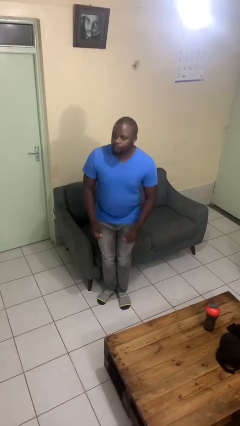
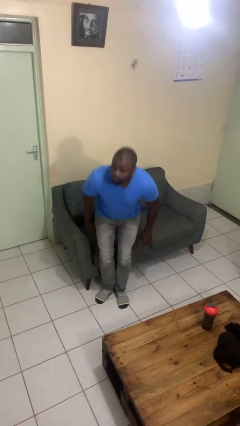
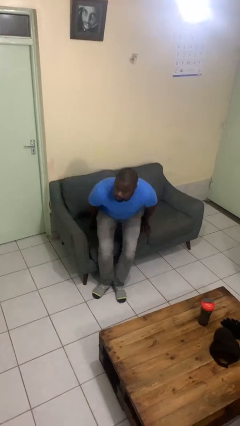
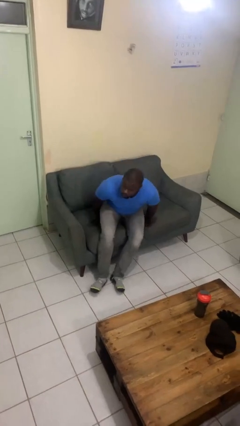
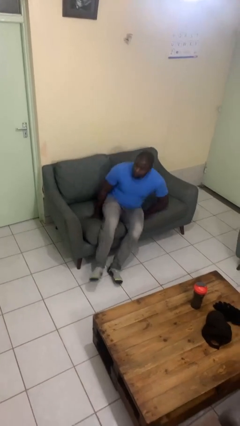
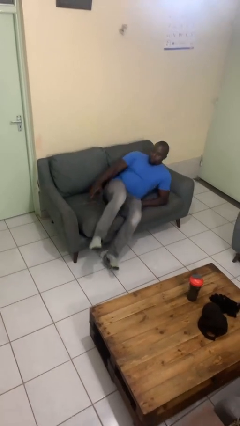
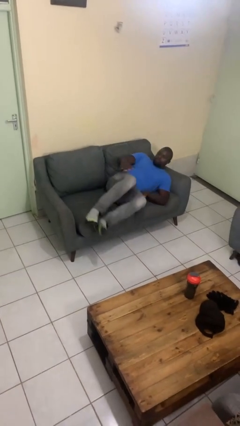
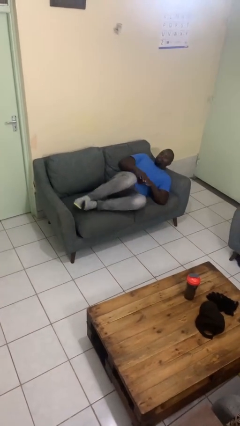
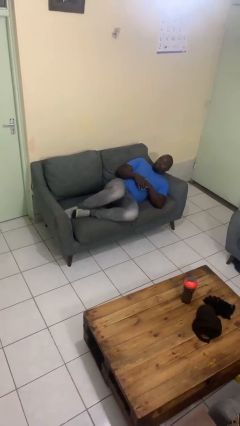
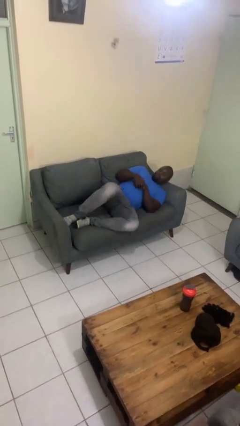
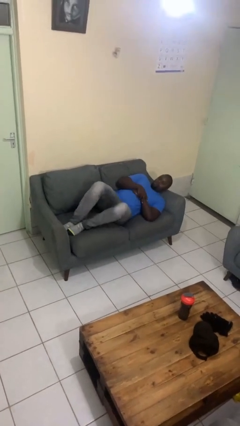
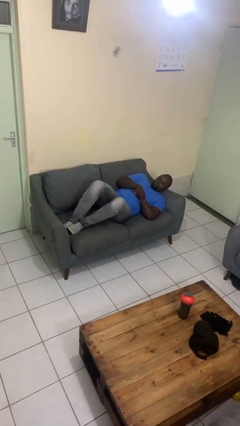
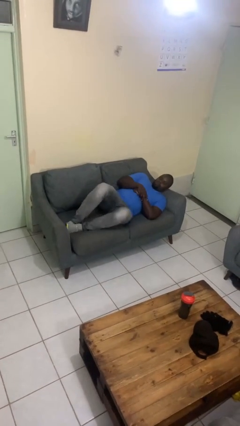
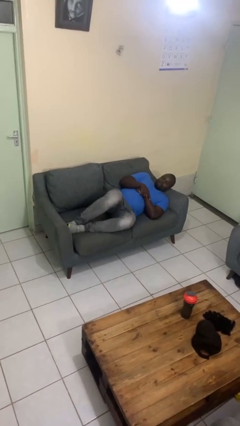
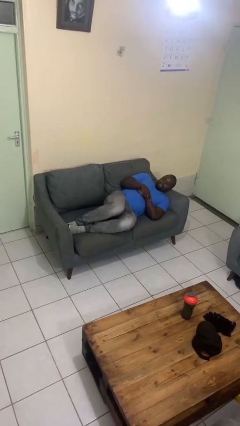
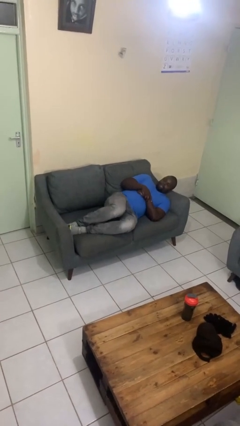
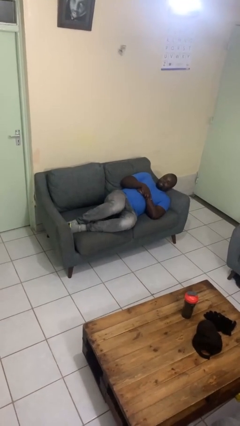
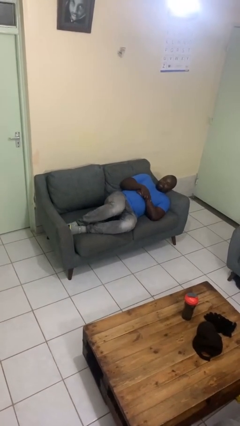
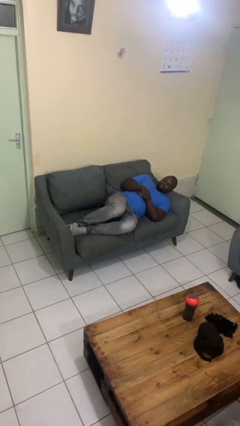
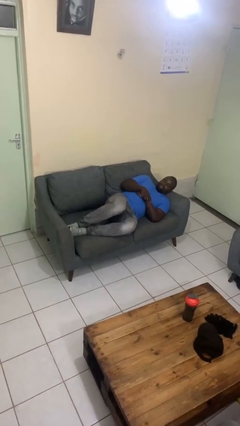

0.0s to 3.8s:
person lies down on couch

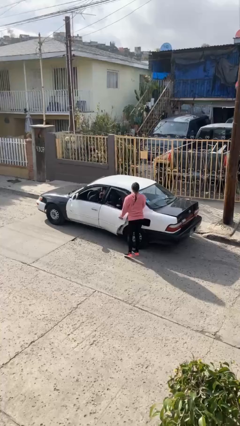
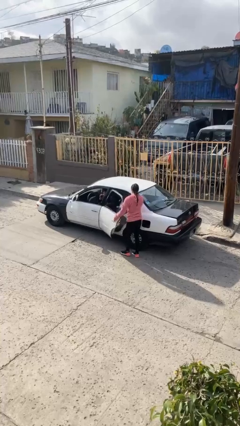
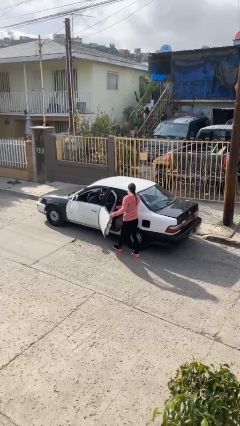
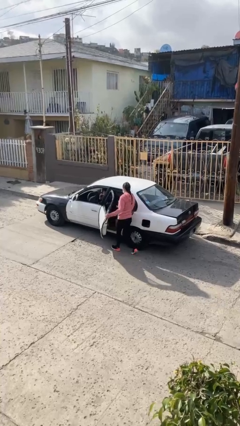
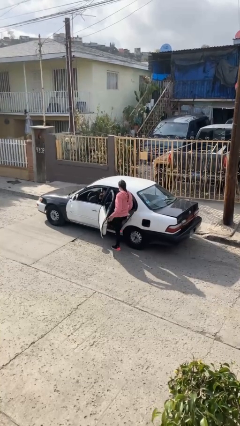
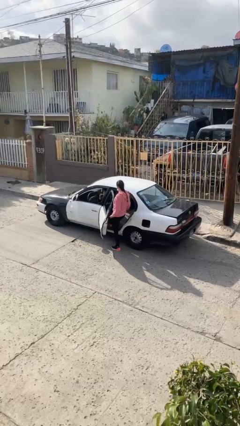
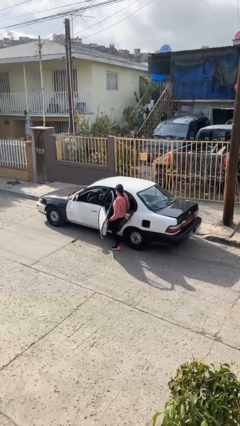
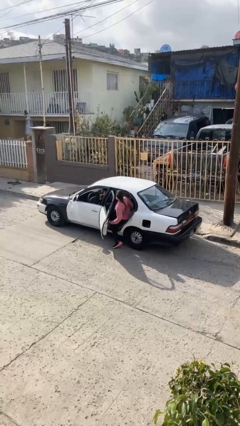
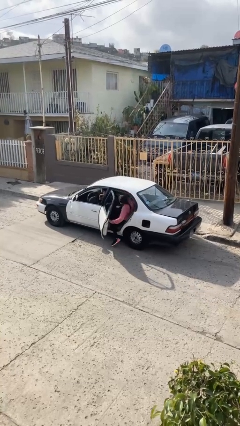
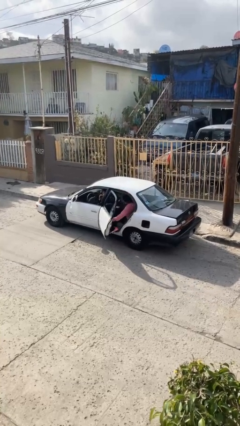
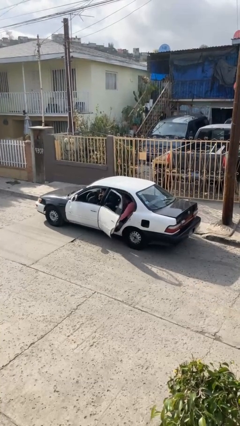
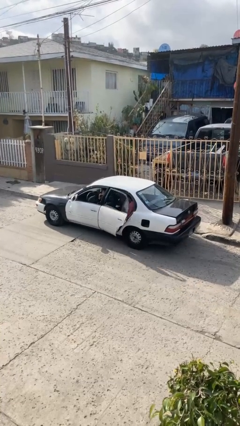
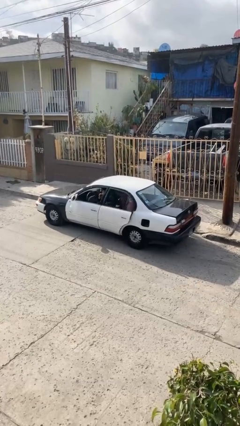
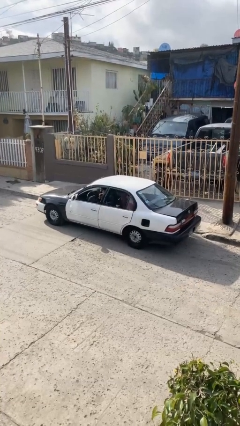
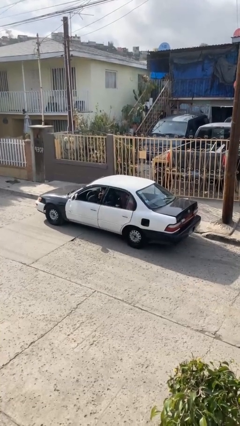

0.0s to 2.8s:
car picks up person

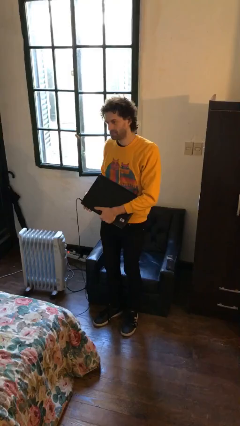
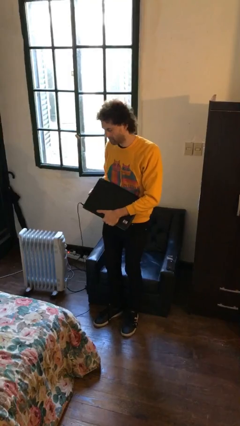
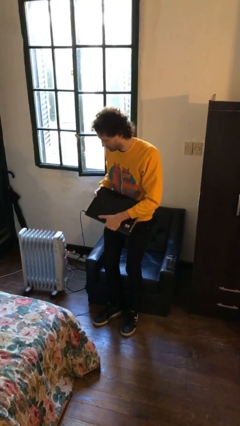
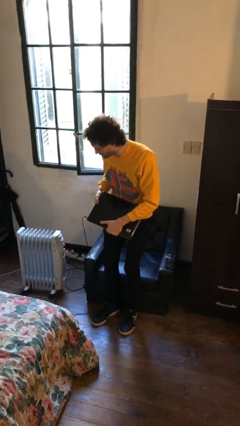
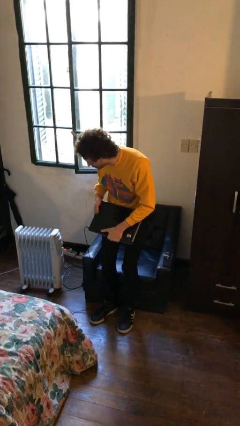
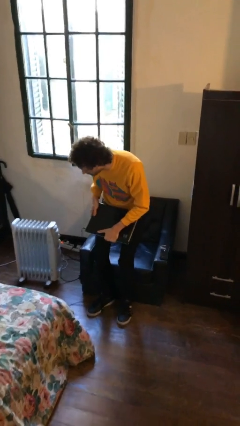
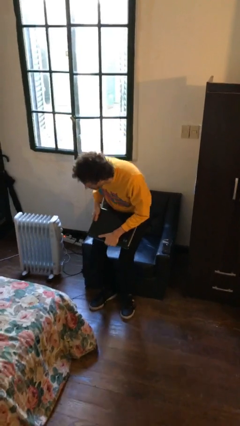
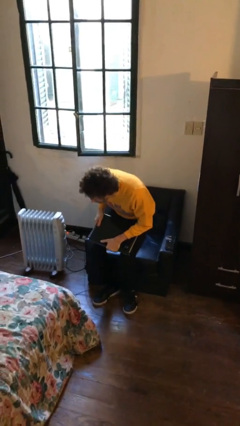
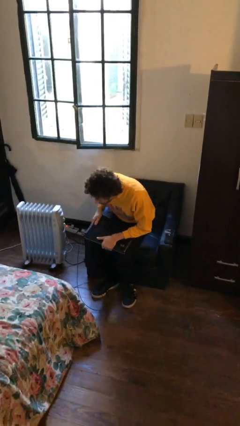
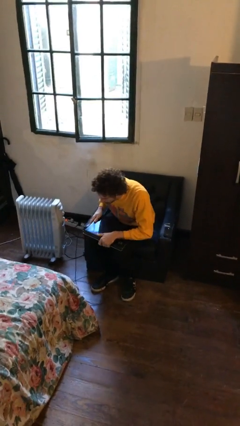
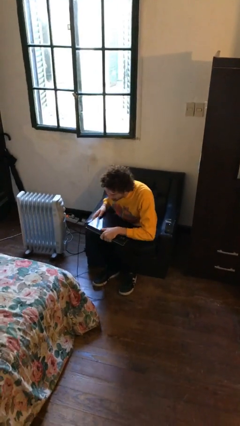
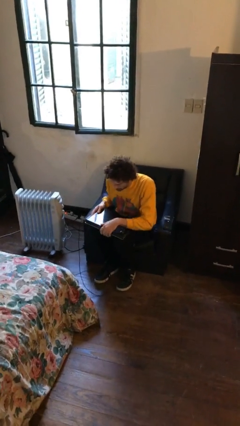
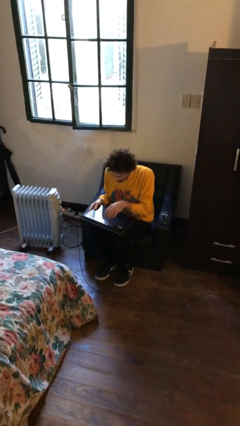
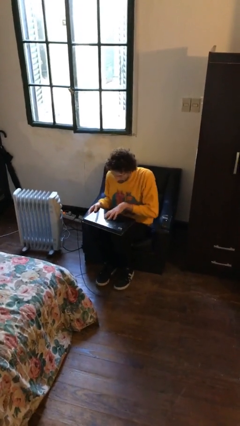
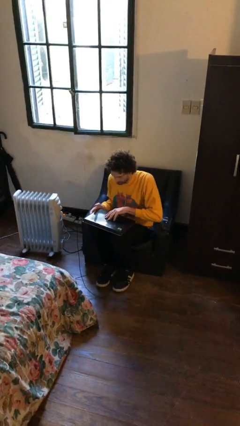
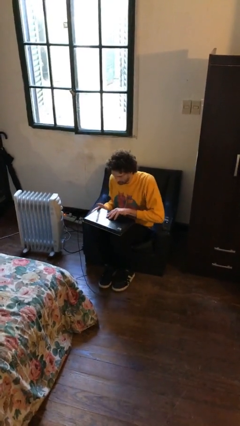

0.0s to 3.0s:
person sits down

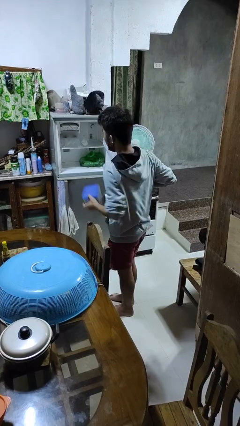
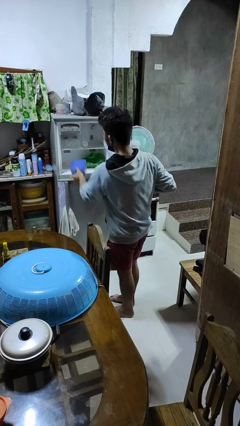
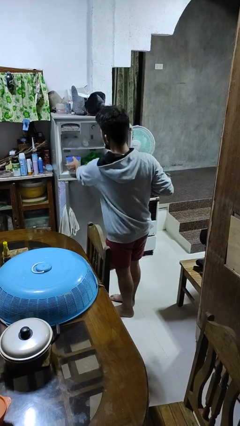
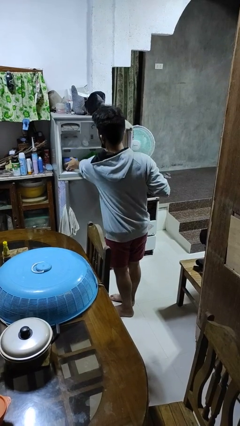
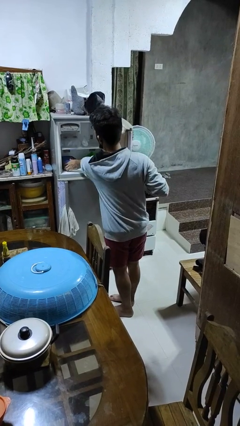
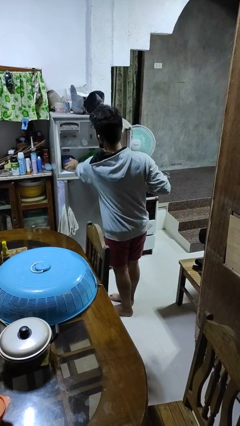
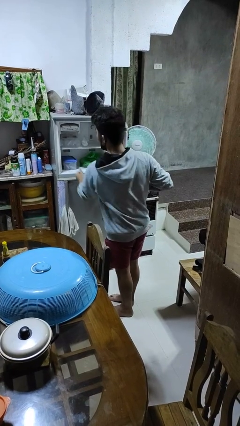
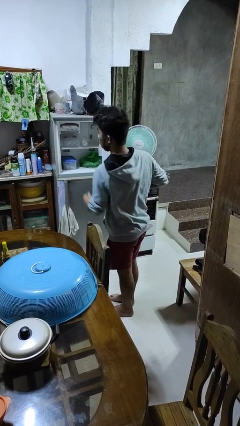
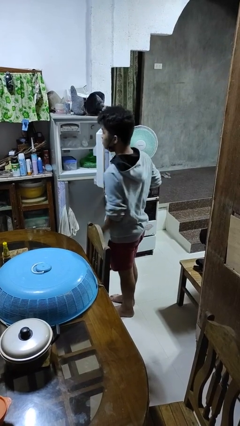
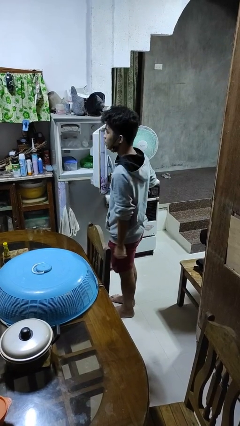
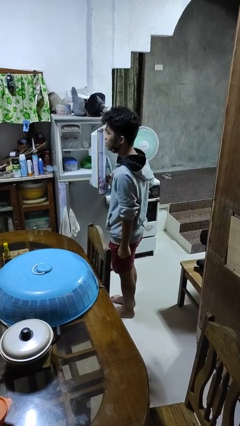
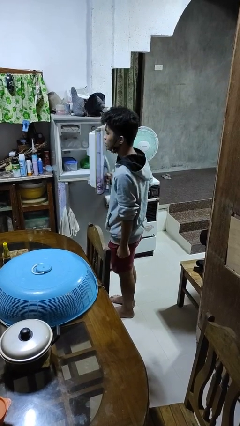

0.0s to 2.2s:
person puts object into refrigerator

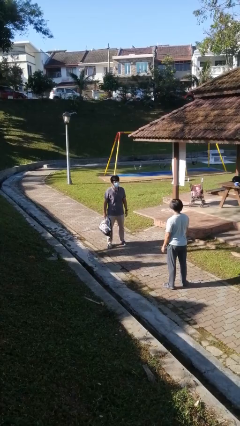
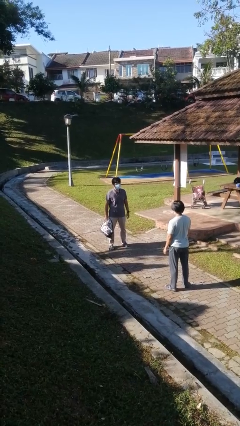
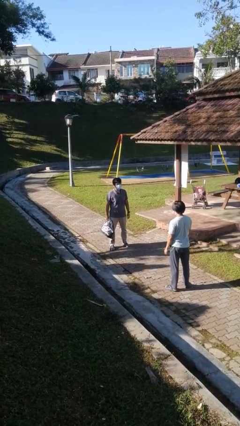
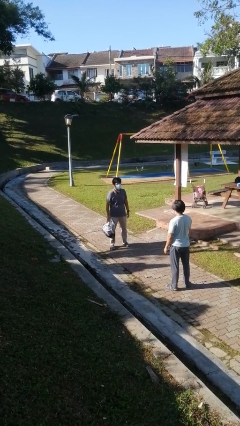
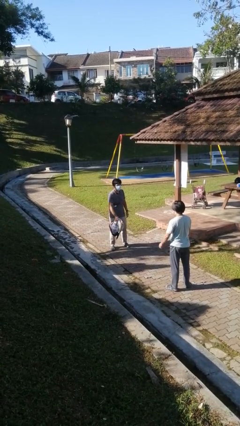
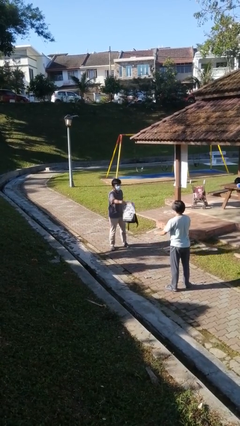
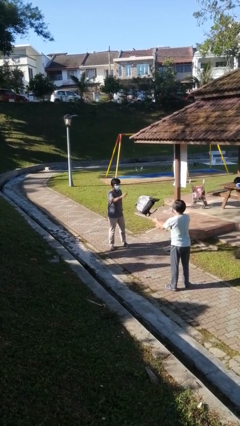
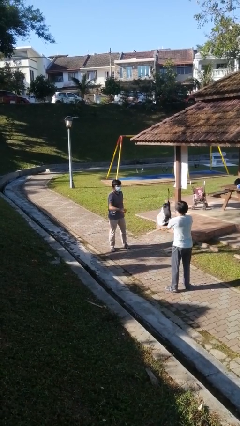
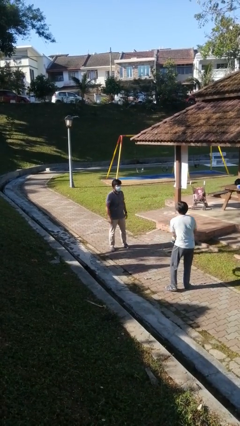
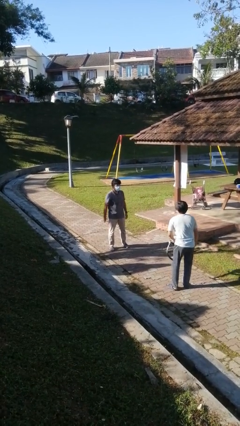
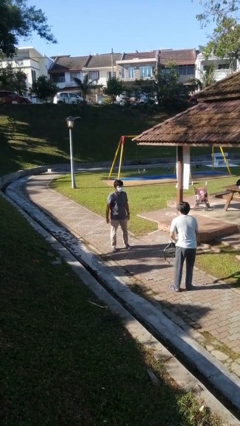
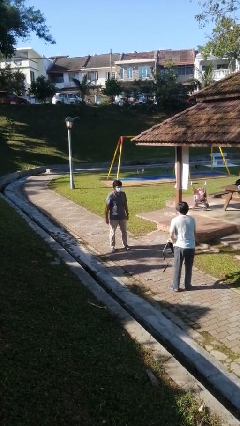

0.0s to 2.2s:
person throws object to person

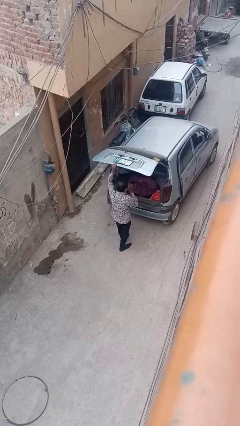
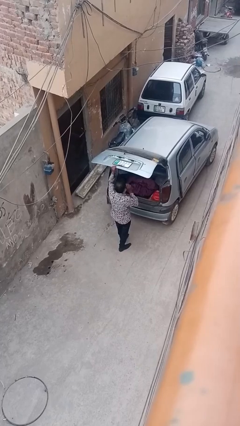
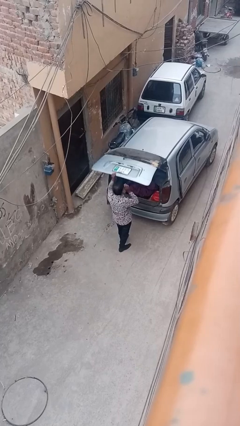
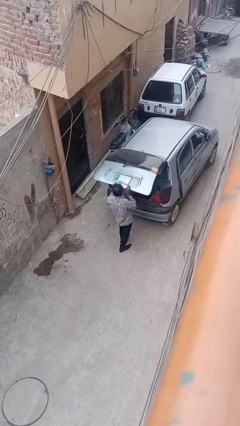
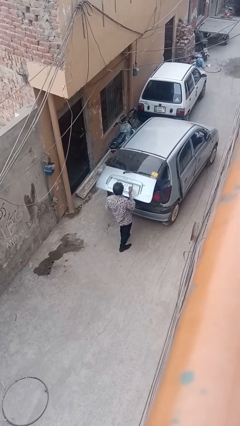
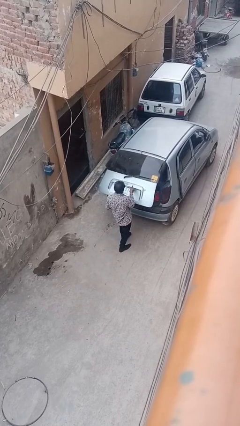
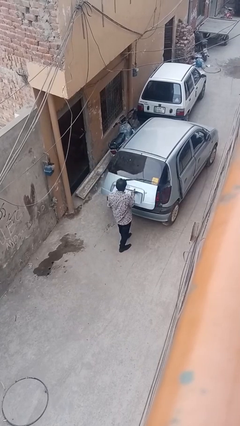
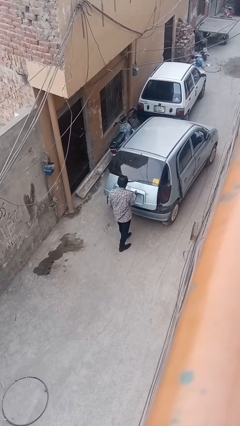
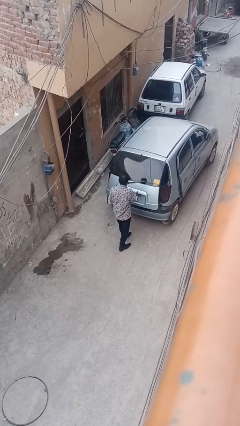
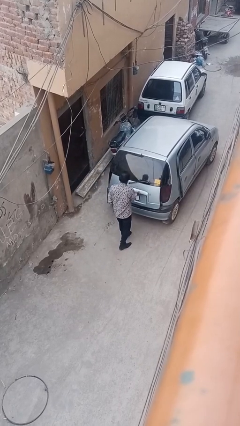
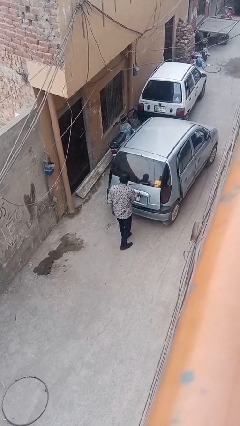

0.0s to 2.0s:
person closes car trunk

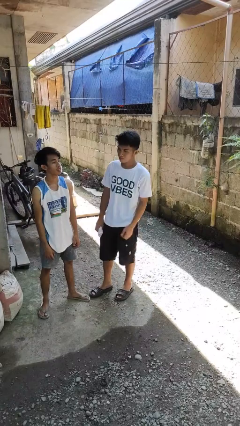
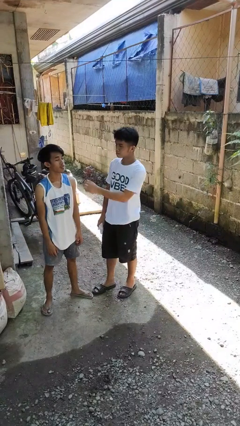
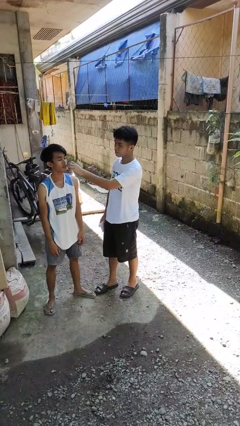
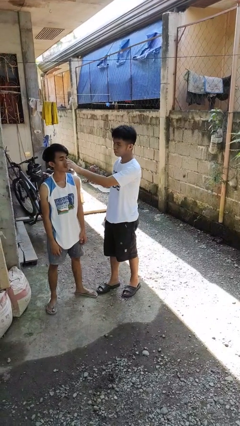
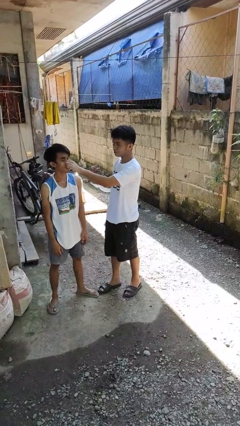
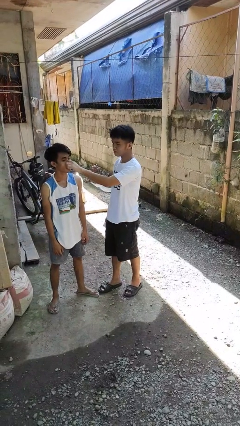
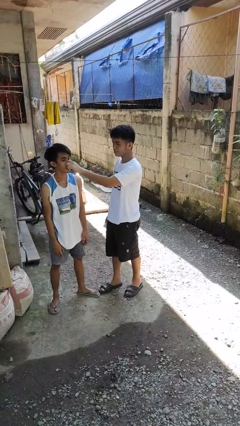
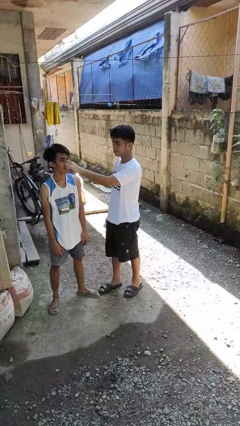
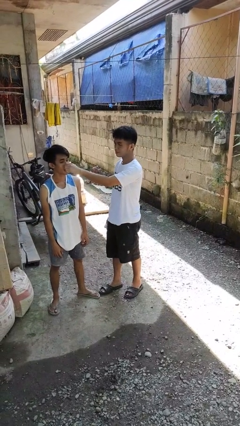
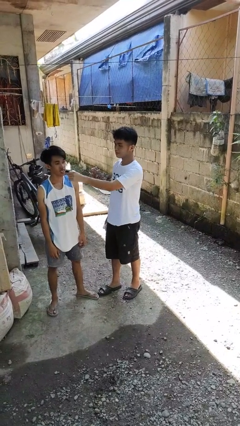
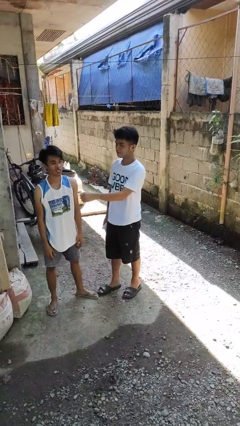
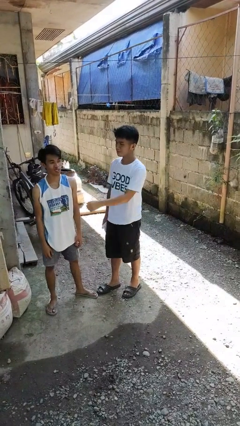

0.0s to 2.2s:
person touches face of person
